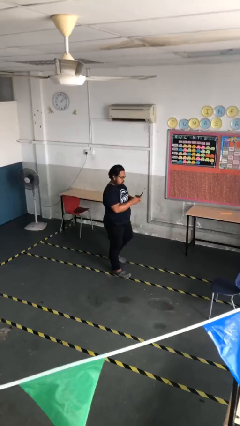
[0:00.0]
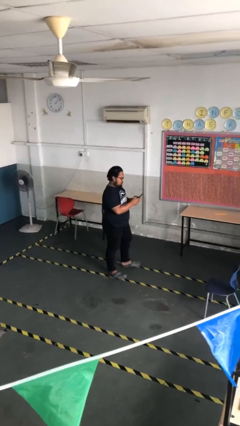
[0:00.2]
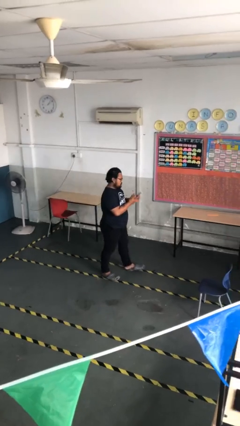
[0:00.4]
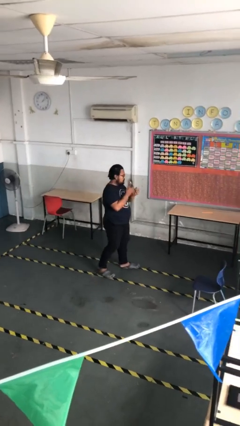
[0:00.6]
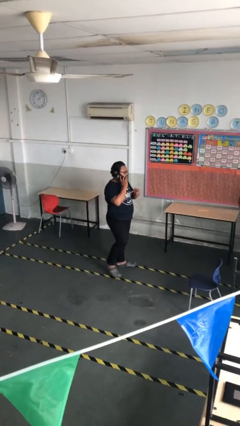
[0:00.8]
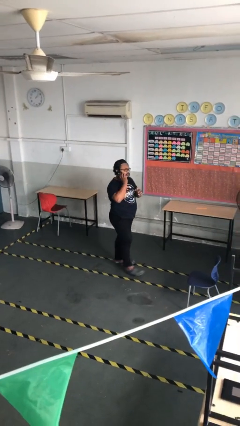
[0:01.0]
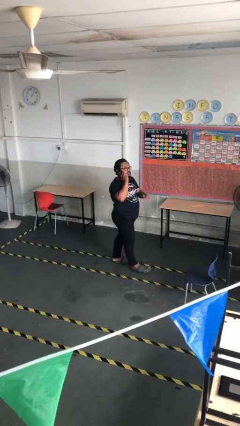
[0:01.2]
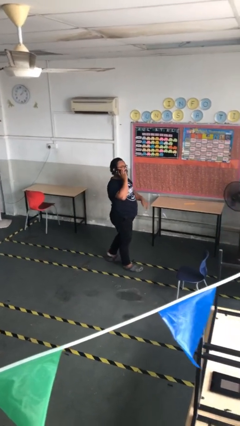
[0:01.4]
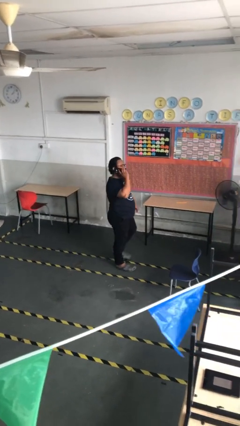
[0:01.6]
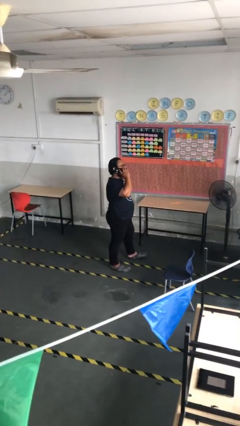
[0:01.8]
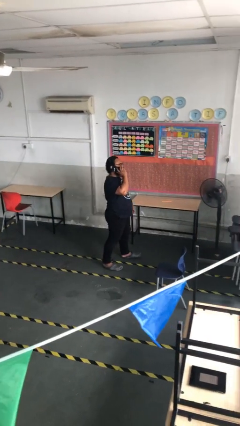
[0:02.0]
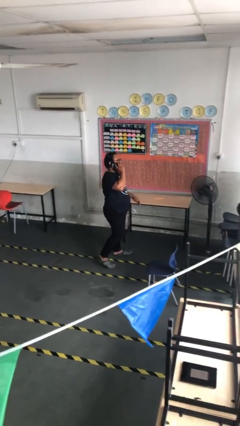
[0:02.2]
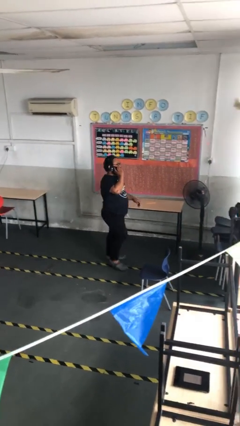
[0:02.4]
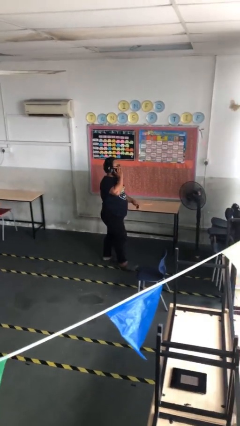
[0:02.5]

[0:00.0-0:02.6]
person talks on phone

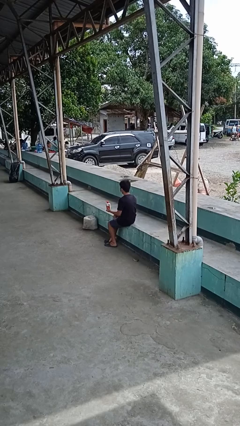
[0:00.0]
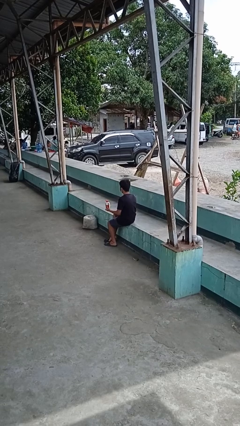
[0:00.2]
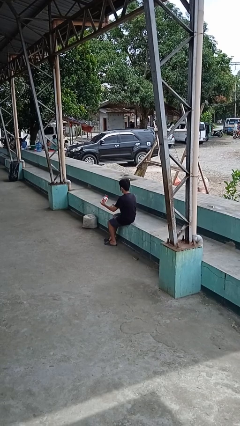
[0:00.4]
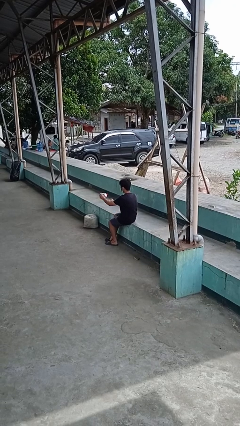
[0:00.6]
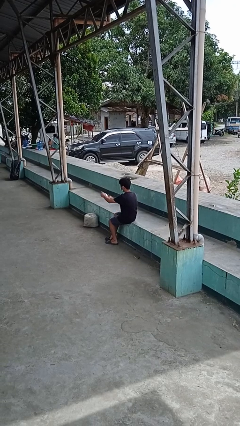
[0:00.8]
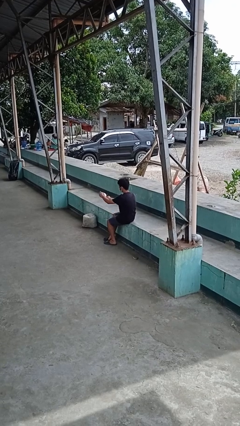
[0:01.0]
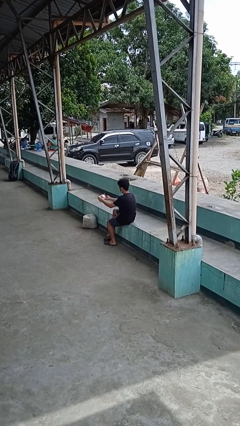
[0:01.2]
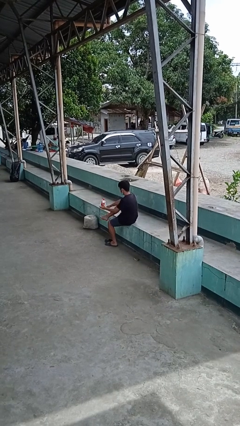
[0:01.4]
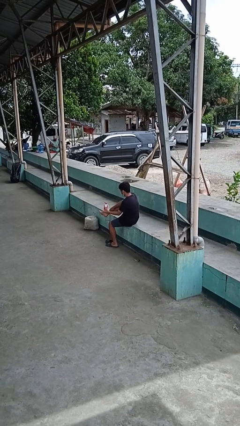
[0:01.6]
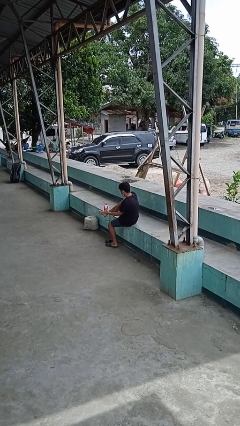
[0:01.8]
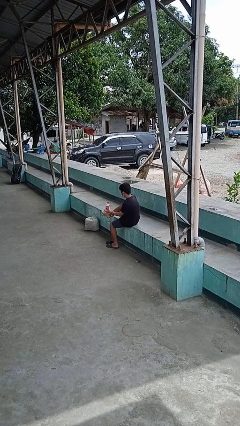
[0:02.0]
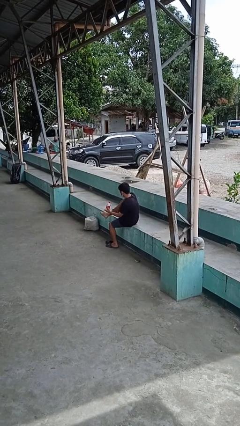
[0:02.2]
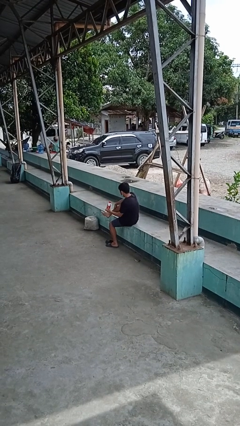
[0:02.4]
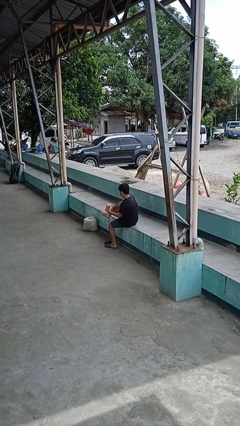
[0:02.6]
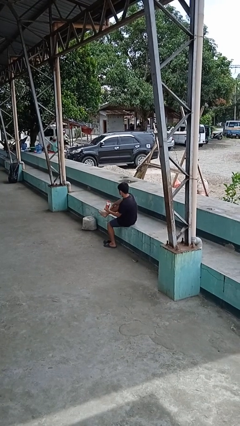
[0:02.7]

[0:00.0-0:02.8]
person applies sunscreen

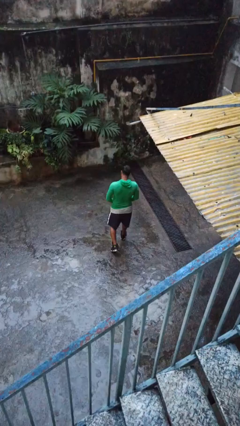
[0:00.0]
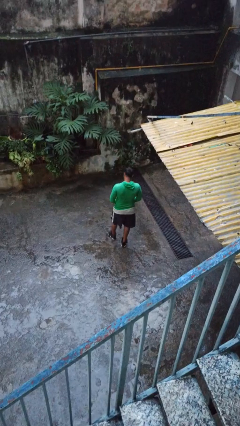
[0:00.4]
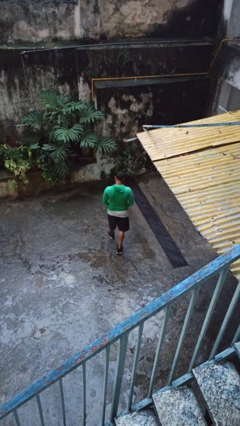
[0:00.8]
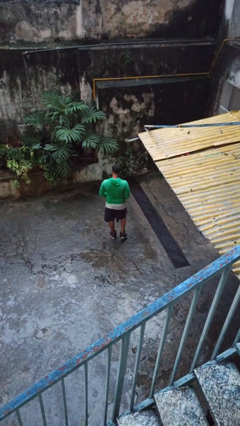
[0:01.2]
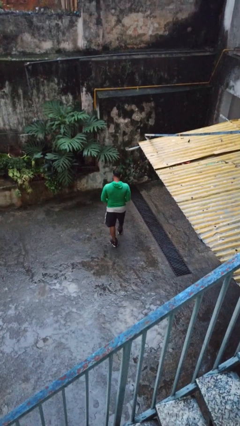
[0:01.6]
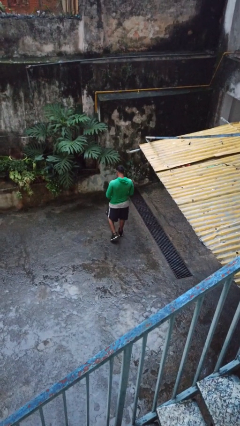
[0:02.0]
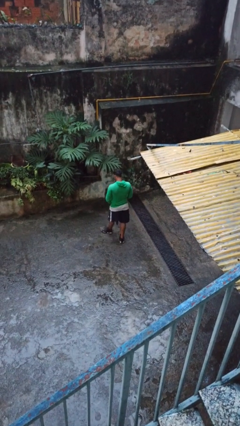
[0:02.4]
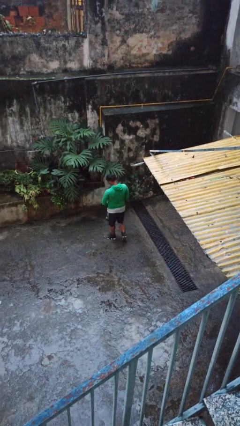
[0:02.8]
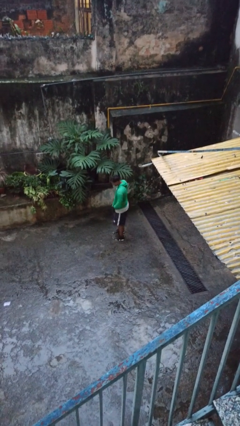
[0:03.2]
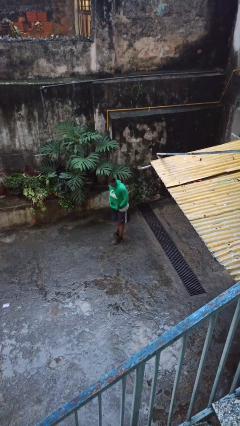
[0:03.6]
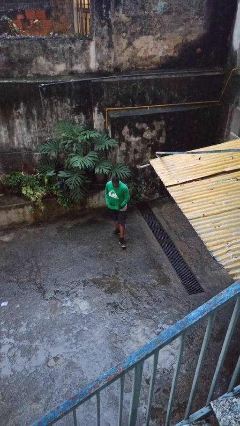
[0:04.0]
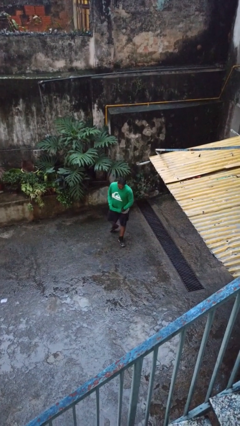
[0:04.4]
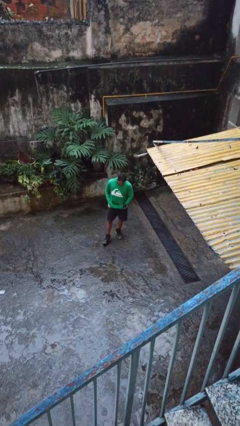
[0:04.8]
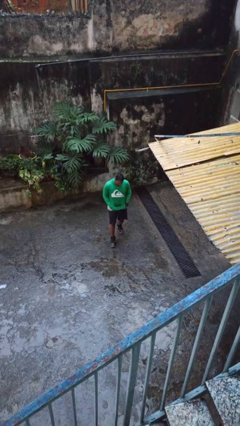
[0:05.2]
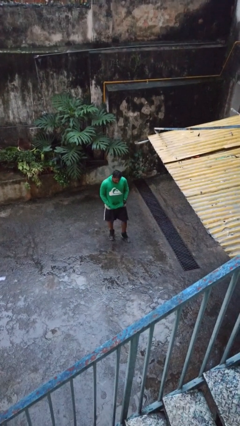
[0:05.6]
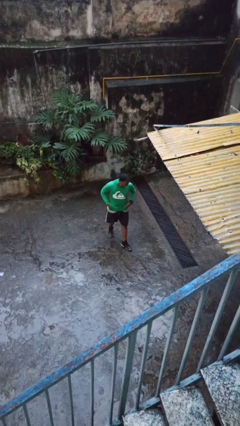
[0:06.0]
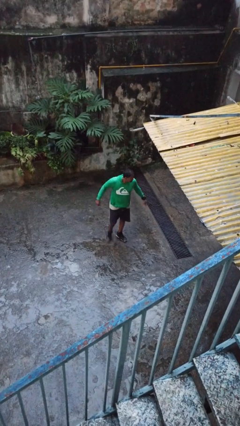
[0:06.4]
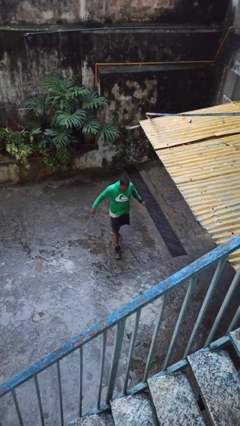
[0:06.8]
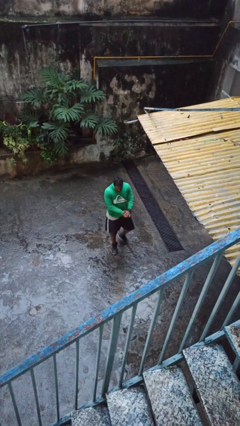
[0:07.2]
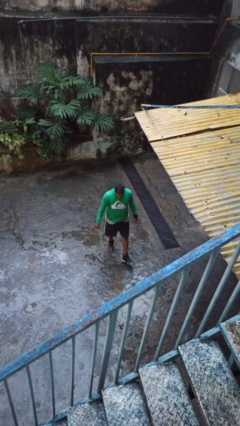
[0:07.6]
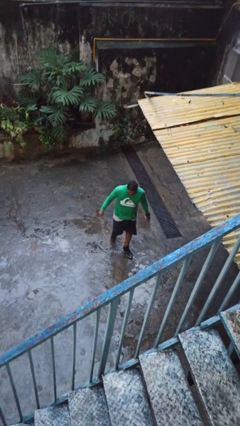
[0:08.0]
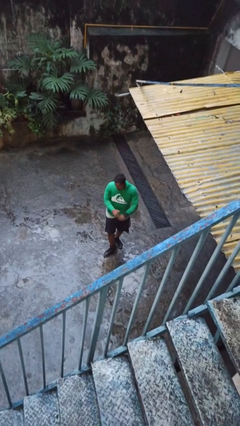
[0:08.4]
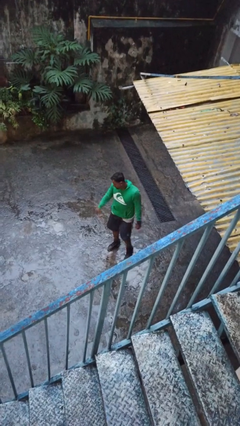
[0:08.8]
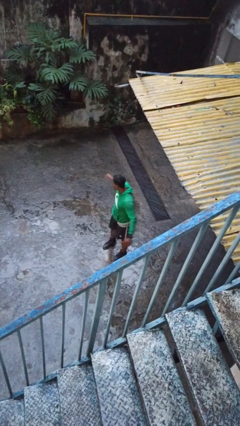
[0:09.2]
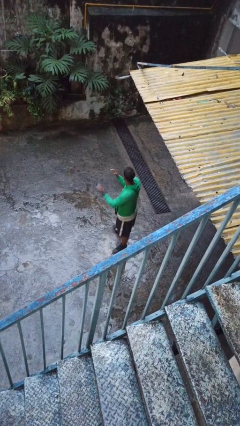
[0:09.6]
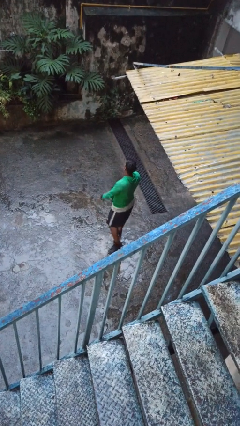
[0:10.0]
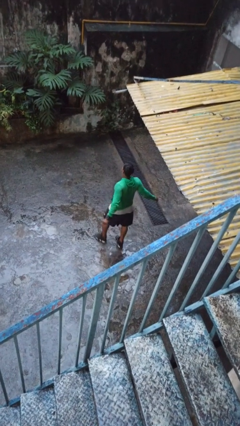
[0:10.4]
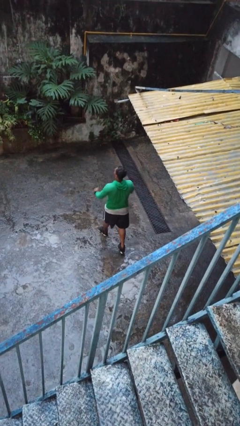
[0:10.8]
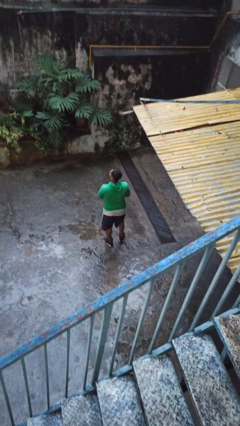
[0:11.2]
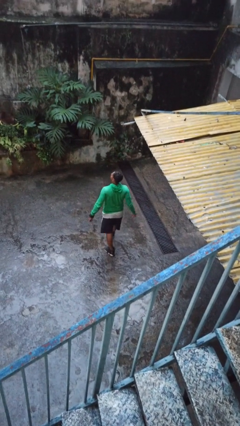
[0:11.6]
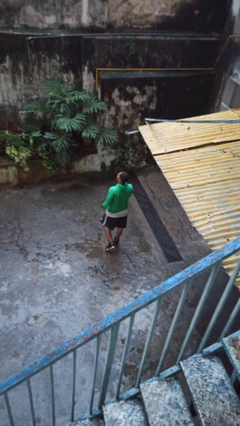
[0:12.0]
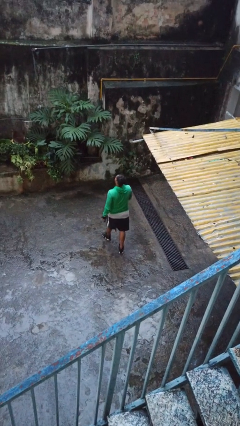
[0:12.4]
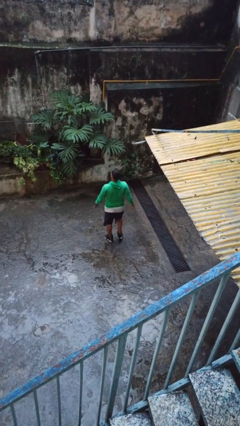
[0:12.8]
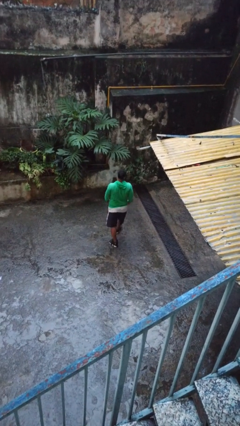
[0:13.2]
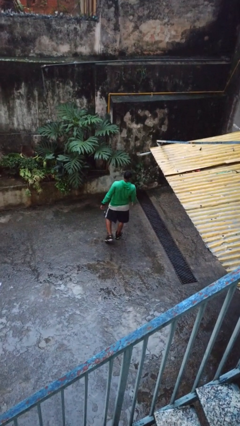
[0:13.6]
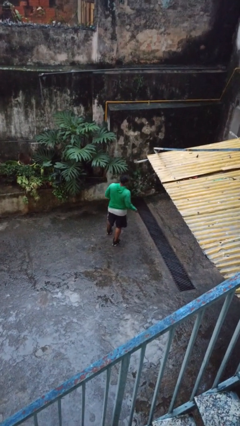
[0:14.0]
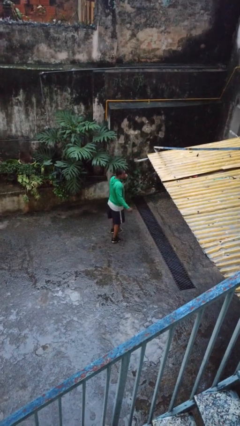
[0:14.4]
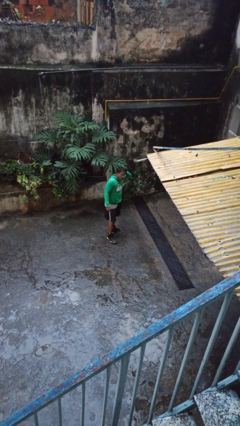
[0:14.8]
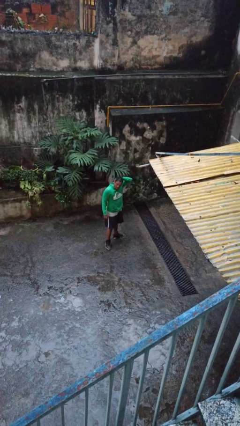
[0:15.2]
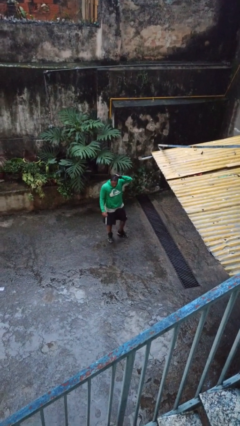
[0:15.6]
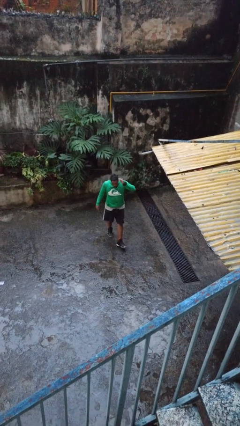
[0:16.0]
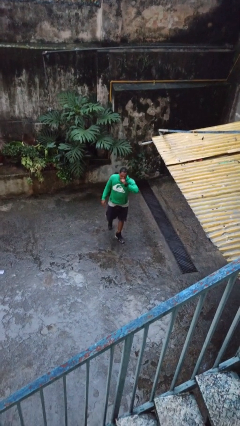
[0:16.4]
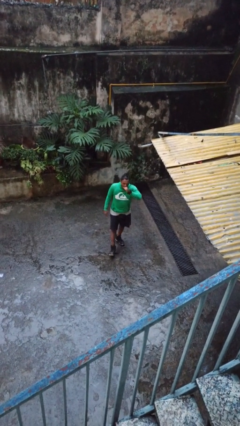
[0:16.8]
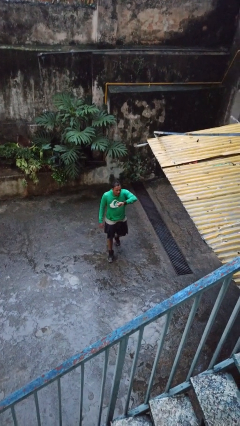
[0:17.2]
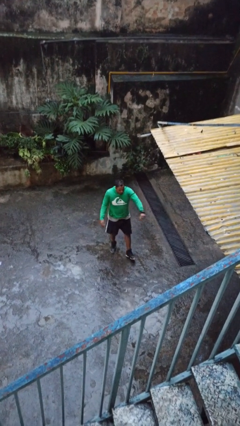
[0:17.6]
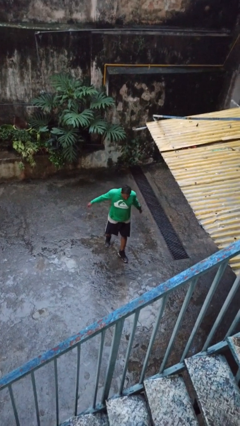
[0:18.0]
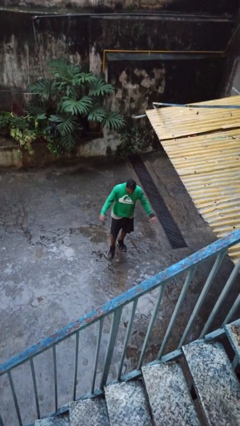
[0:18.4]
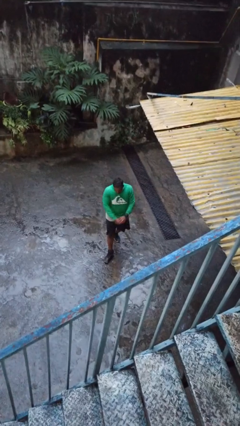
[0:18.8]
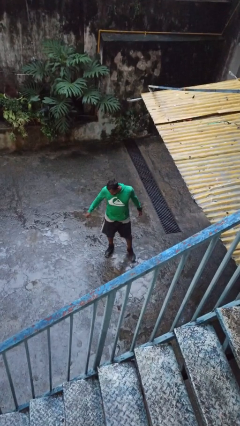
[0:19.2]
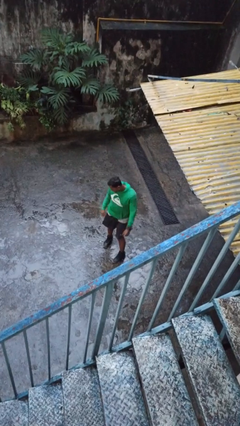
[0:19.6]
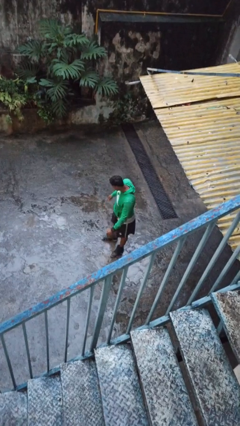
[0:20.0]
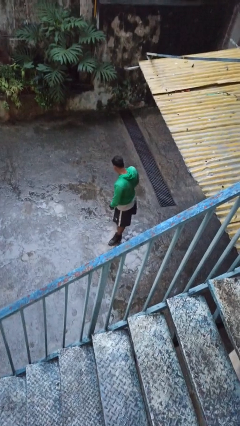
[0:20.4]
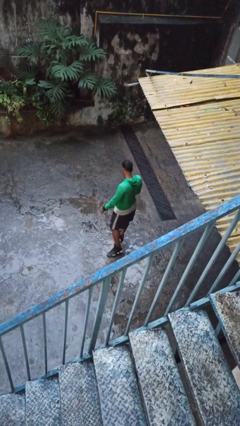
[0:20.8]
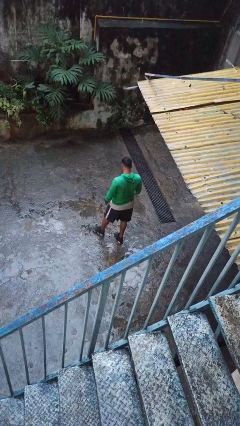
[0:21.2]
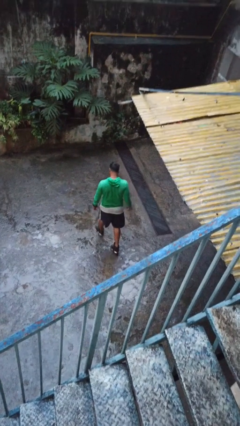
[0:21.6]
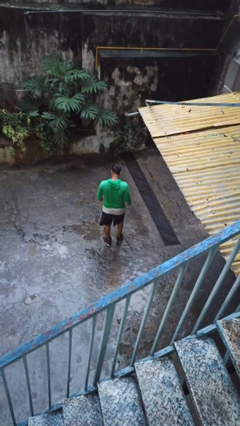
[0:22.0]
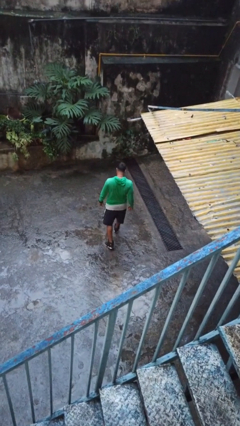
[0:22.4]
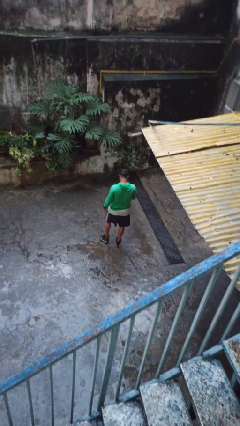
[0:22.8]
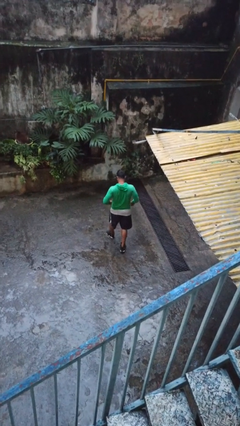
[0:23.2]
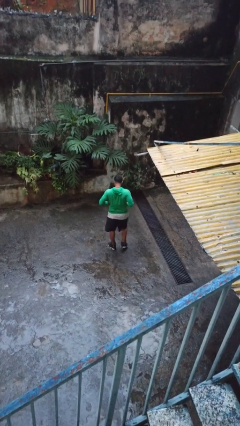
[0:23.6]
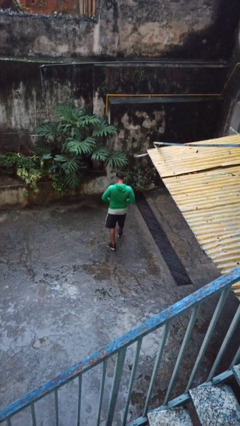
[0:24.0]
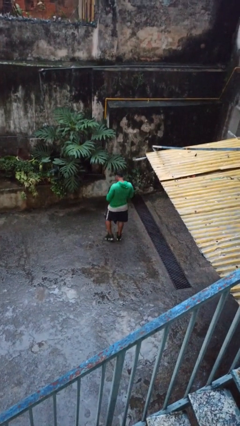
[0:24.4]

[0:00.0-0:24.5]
person walks

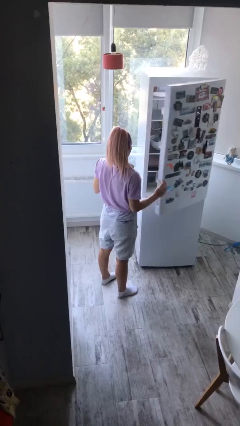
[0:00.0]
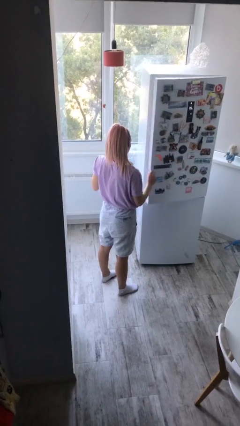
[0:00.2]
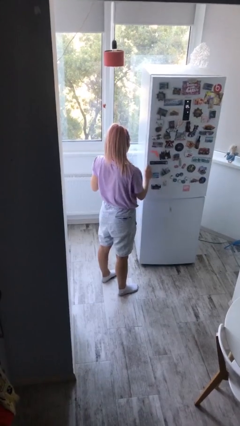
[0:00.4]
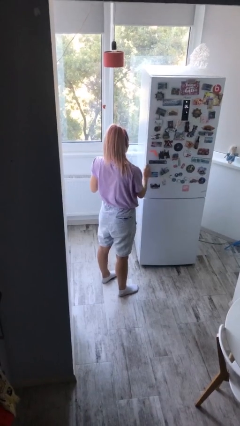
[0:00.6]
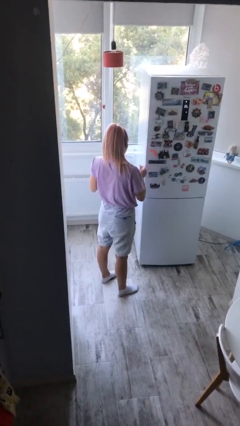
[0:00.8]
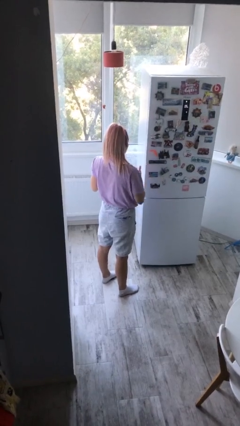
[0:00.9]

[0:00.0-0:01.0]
person closes refrigerator
